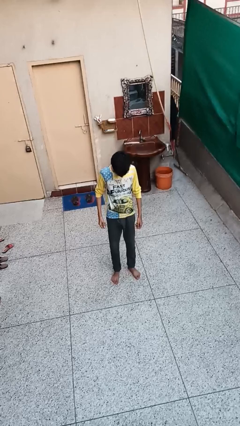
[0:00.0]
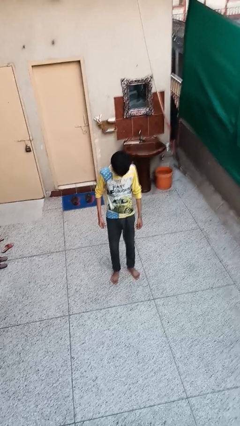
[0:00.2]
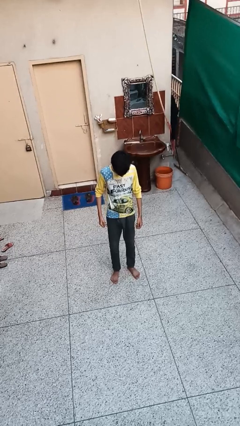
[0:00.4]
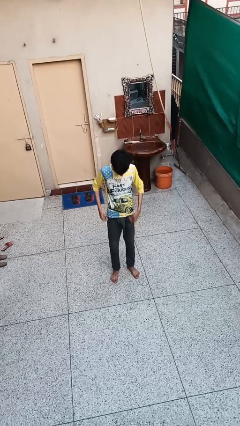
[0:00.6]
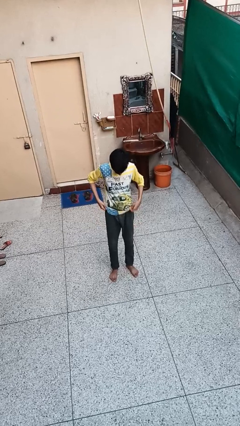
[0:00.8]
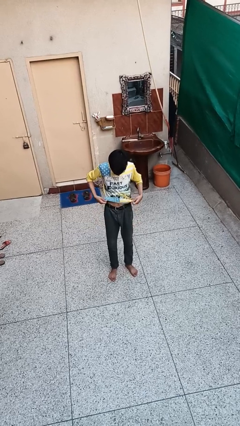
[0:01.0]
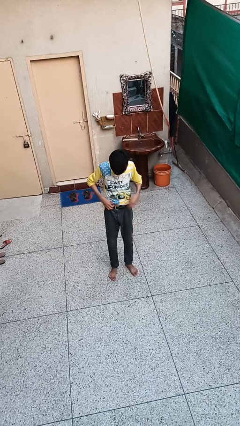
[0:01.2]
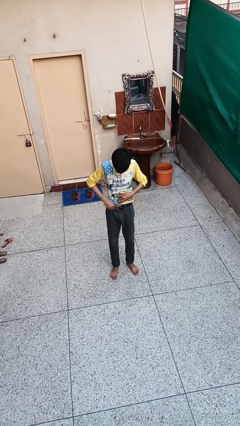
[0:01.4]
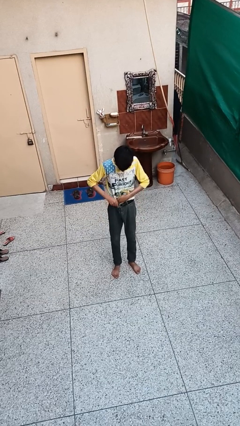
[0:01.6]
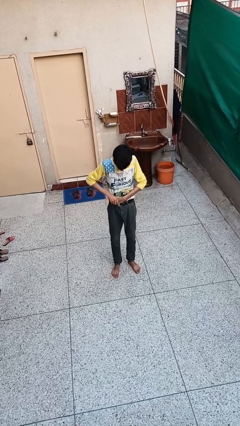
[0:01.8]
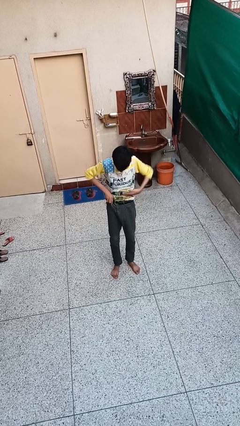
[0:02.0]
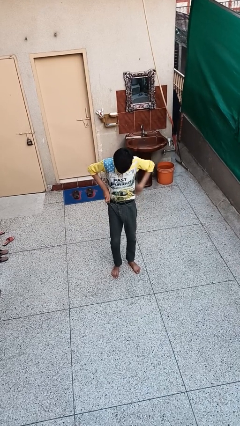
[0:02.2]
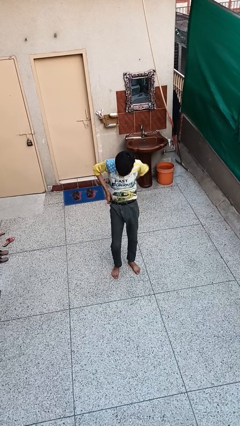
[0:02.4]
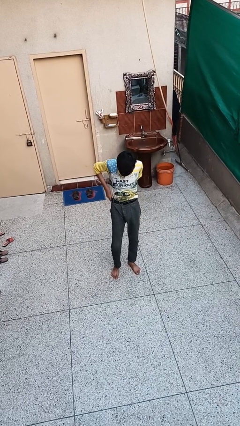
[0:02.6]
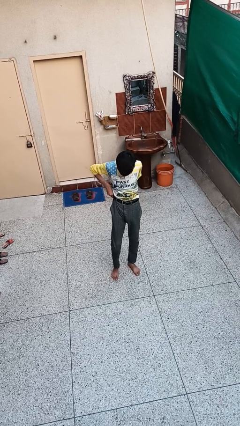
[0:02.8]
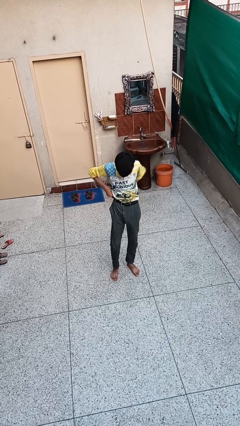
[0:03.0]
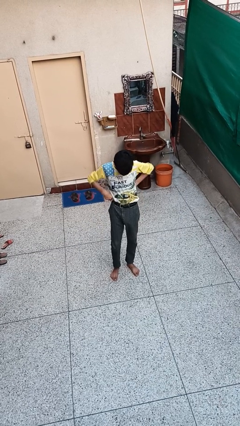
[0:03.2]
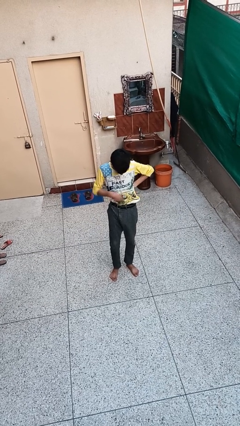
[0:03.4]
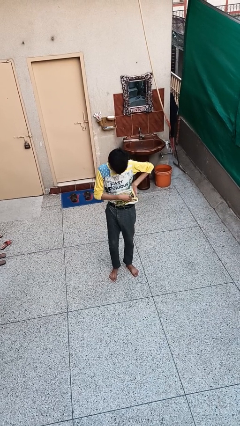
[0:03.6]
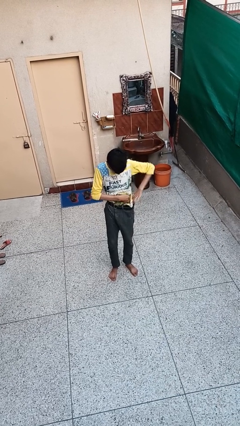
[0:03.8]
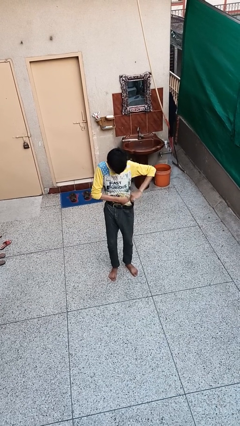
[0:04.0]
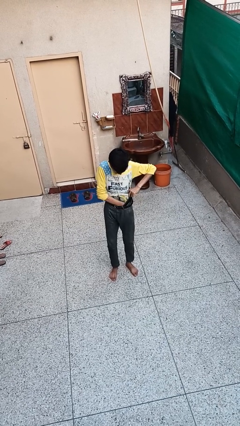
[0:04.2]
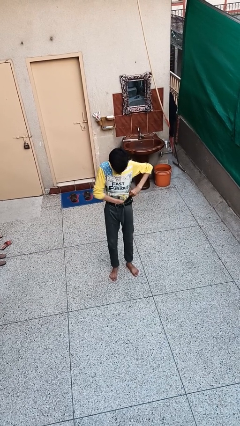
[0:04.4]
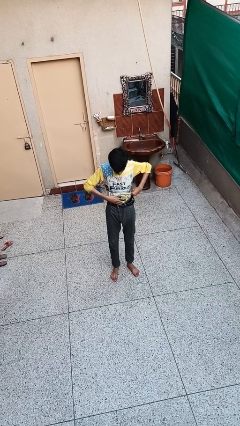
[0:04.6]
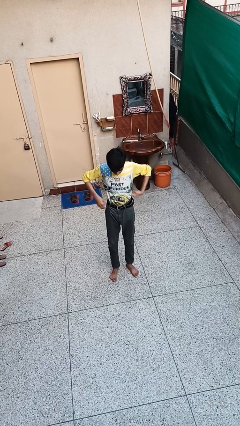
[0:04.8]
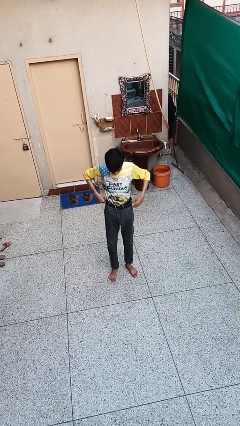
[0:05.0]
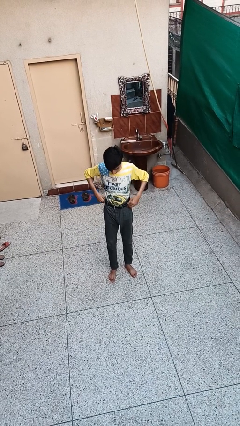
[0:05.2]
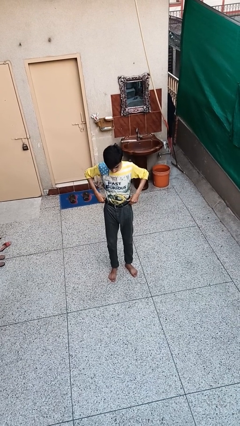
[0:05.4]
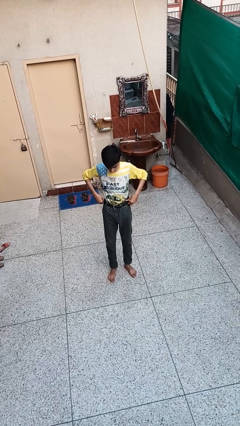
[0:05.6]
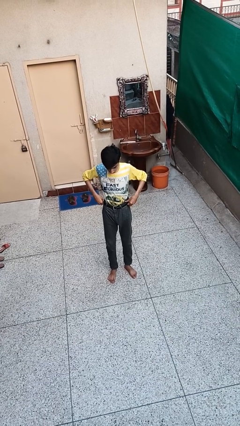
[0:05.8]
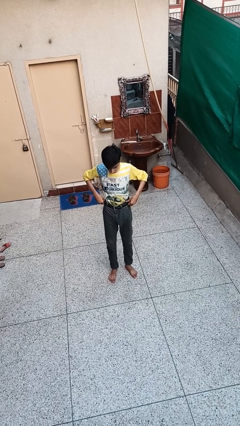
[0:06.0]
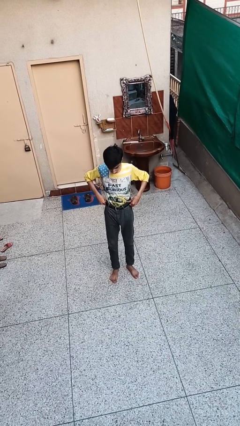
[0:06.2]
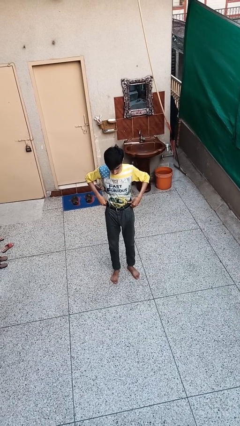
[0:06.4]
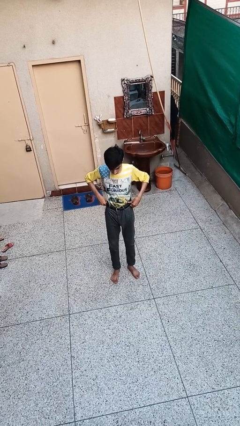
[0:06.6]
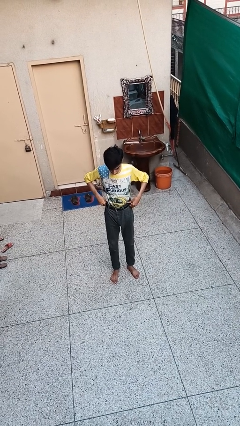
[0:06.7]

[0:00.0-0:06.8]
person tucks in shirt

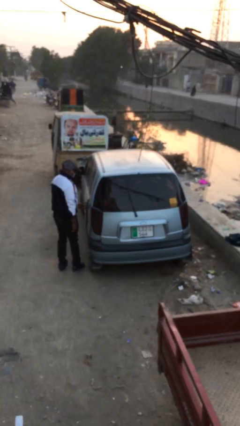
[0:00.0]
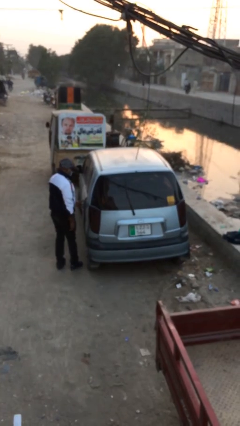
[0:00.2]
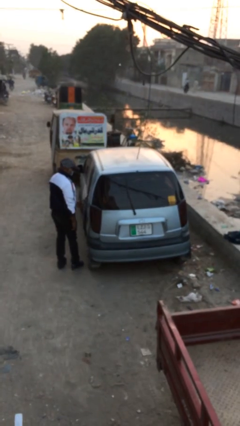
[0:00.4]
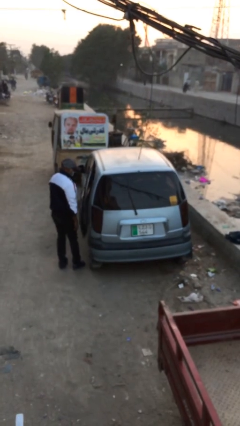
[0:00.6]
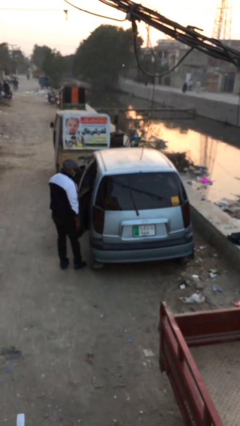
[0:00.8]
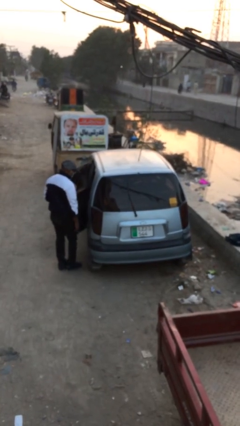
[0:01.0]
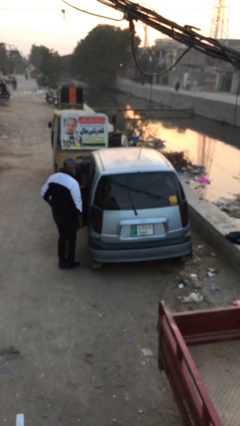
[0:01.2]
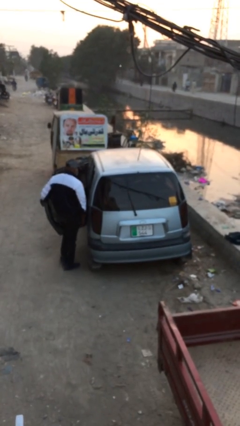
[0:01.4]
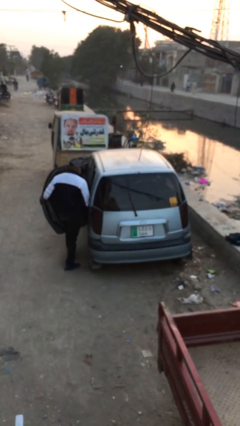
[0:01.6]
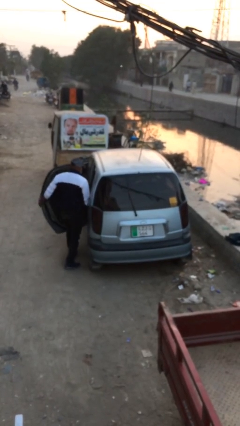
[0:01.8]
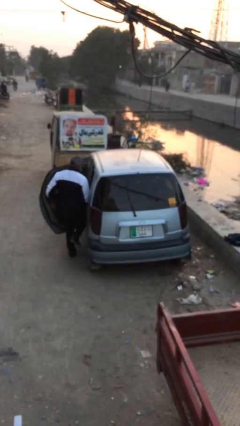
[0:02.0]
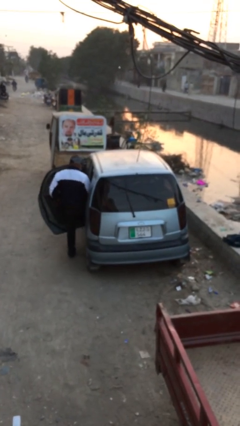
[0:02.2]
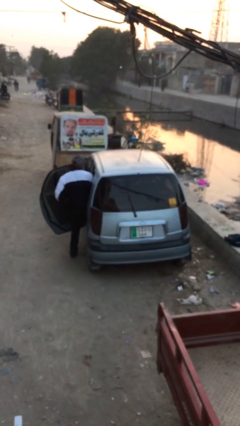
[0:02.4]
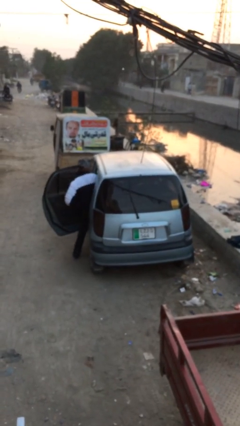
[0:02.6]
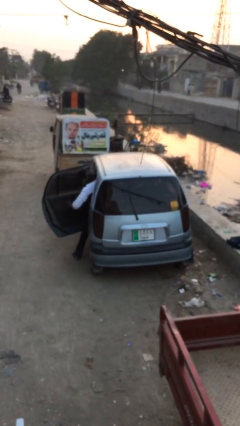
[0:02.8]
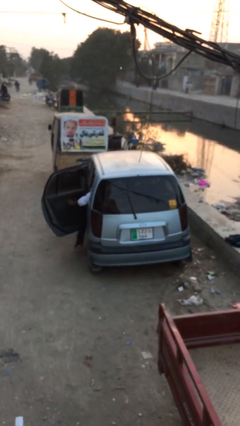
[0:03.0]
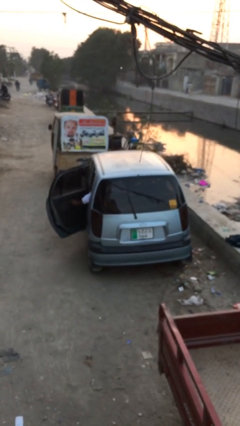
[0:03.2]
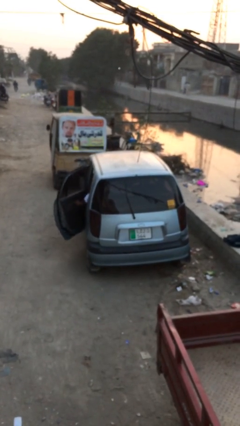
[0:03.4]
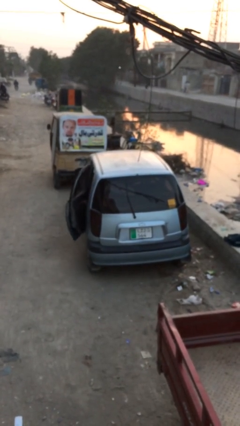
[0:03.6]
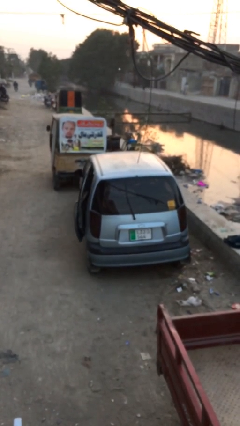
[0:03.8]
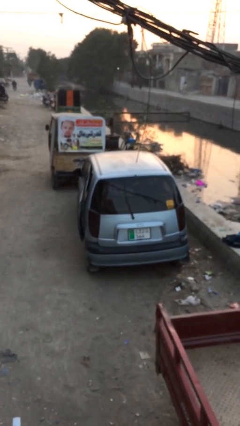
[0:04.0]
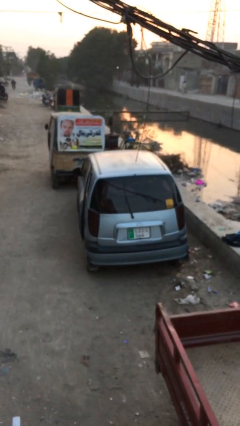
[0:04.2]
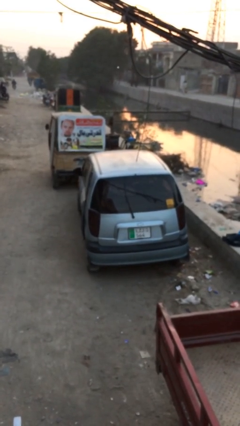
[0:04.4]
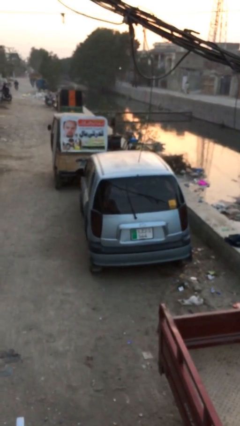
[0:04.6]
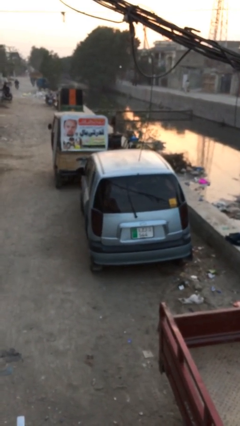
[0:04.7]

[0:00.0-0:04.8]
car picks up person

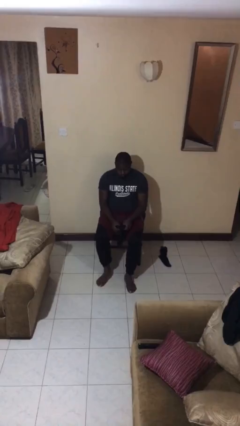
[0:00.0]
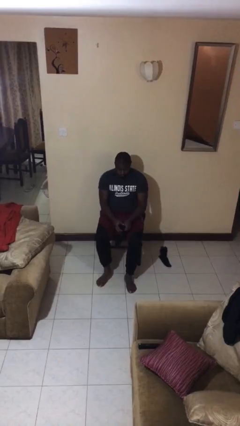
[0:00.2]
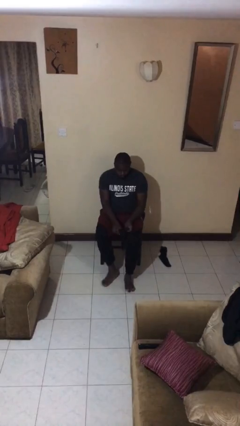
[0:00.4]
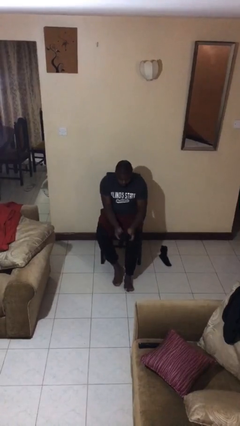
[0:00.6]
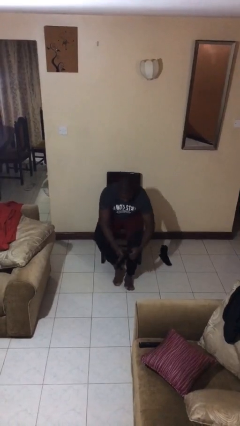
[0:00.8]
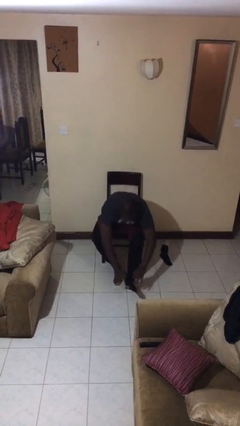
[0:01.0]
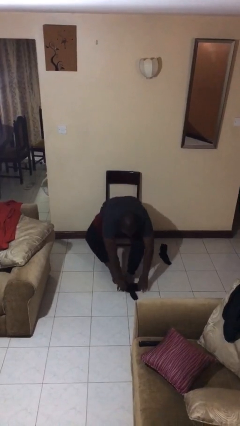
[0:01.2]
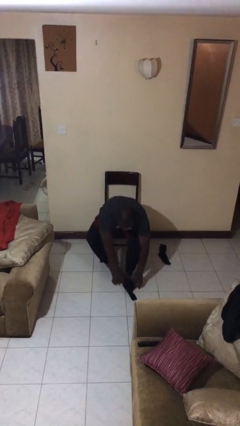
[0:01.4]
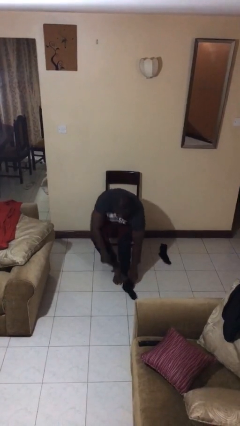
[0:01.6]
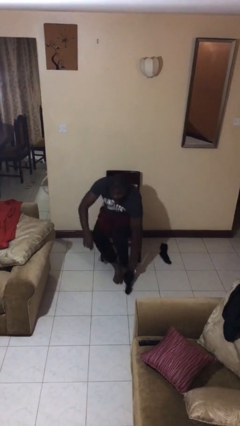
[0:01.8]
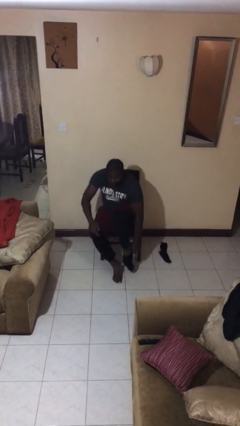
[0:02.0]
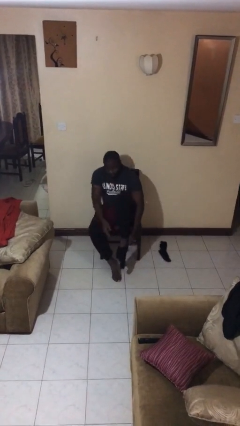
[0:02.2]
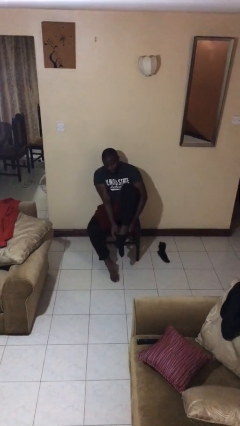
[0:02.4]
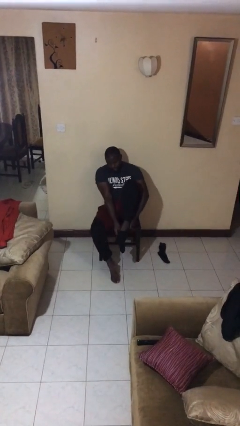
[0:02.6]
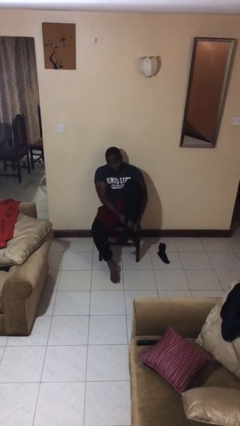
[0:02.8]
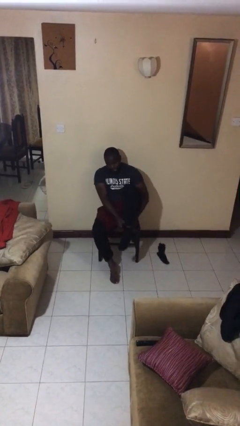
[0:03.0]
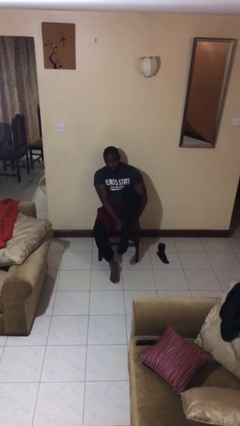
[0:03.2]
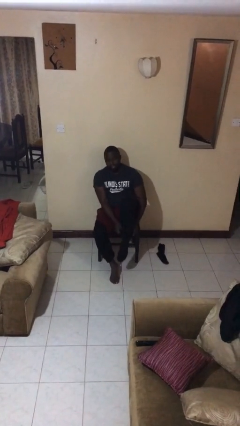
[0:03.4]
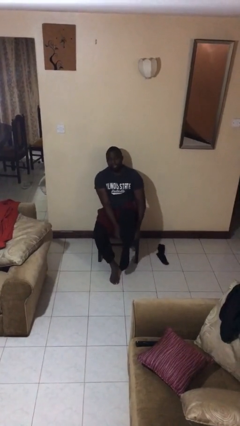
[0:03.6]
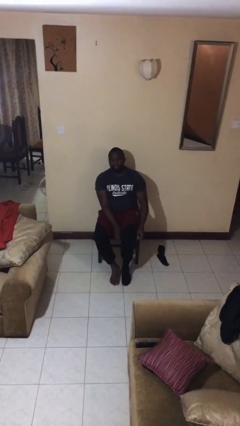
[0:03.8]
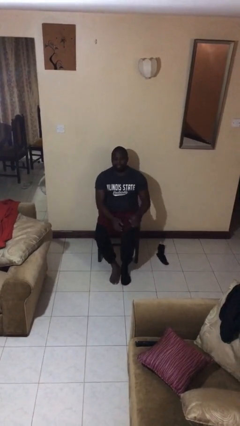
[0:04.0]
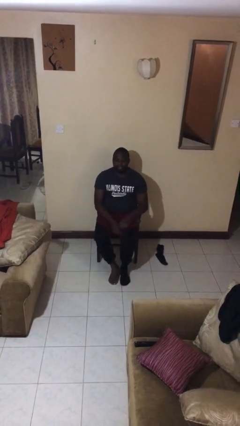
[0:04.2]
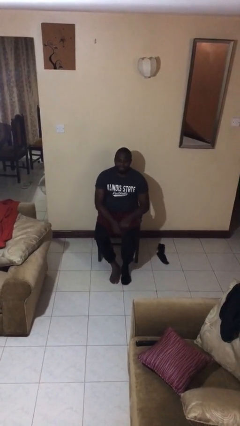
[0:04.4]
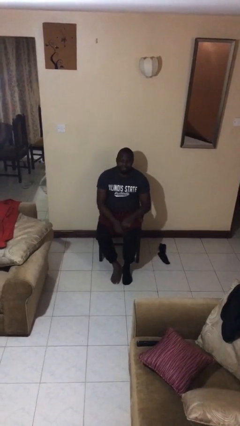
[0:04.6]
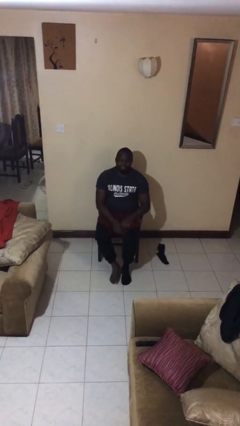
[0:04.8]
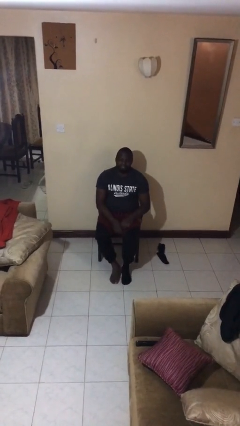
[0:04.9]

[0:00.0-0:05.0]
person puts on socks

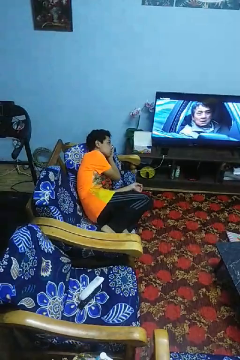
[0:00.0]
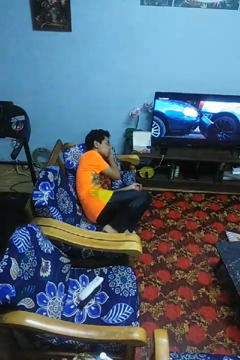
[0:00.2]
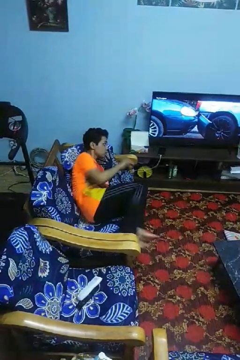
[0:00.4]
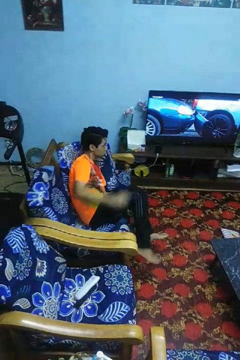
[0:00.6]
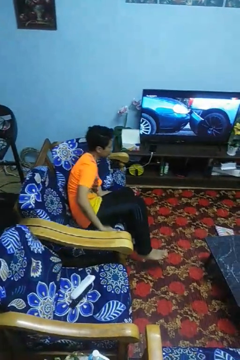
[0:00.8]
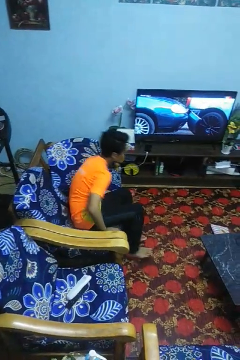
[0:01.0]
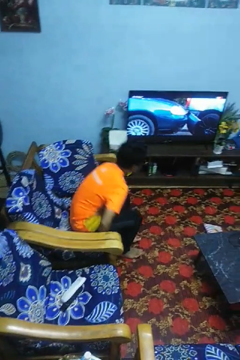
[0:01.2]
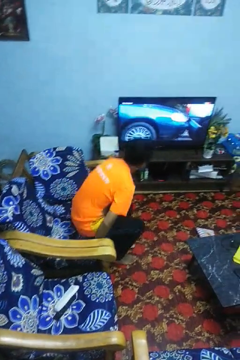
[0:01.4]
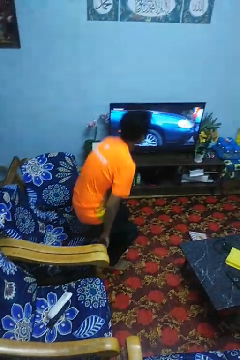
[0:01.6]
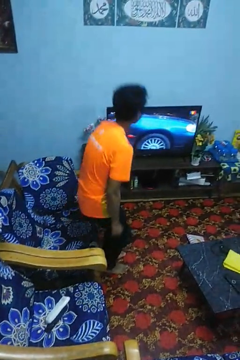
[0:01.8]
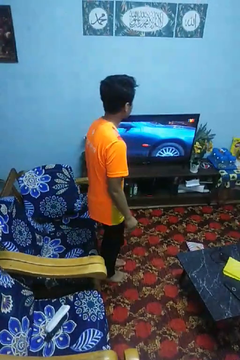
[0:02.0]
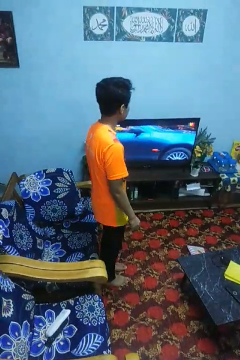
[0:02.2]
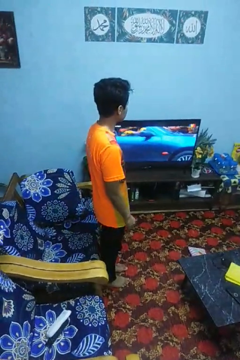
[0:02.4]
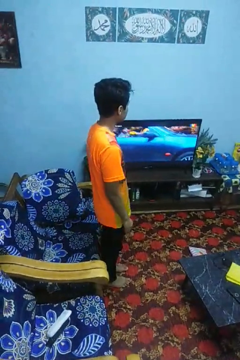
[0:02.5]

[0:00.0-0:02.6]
person stands up
